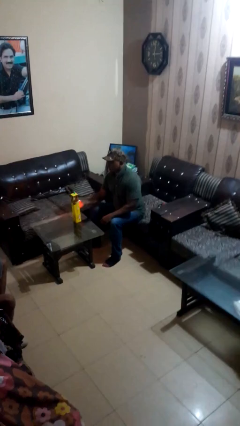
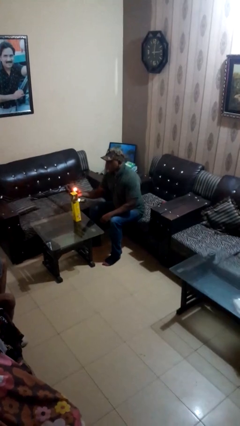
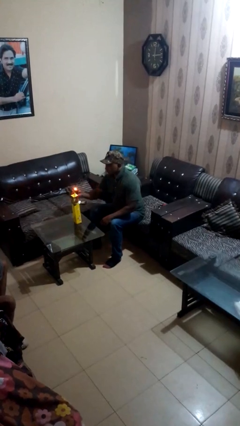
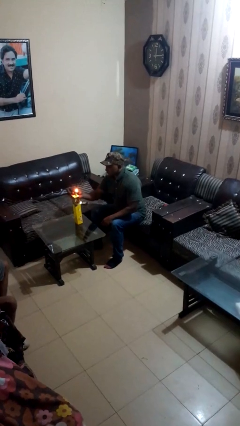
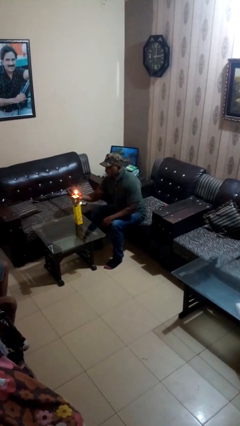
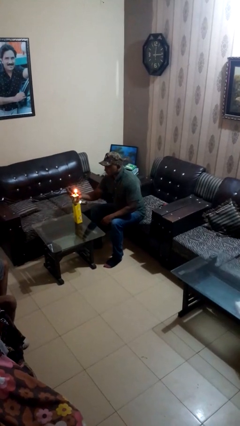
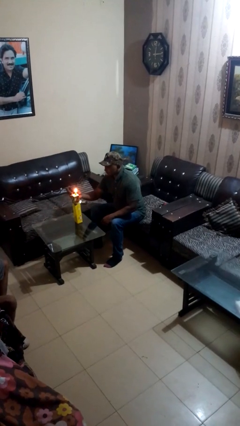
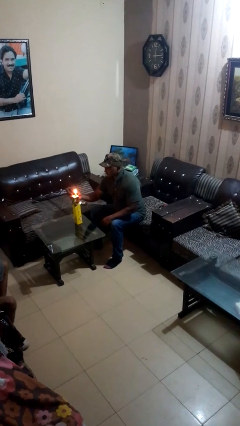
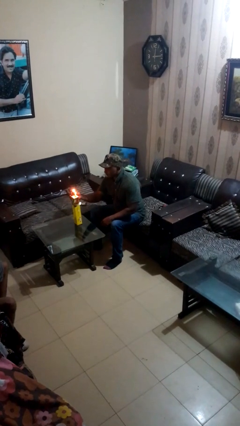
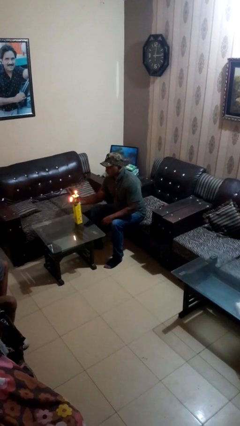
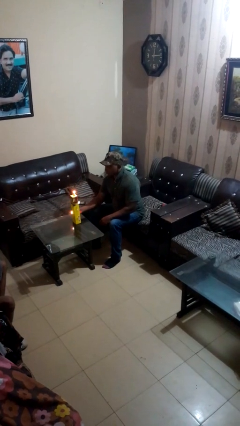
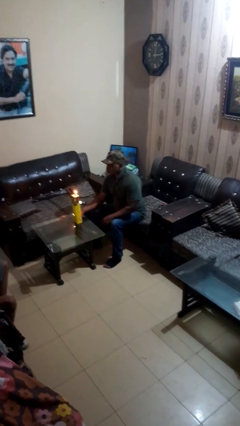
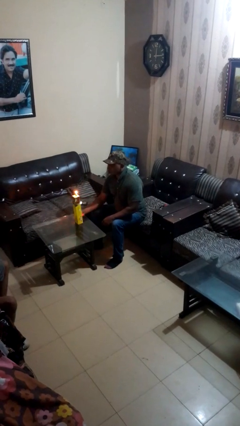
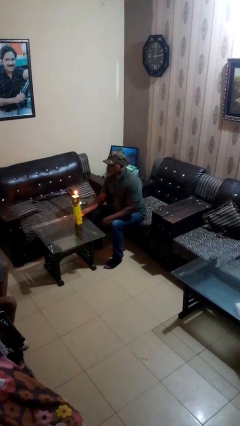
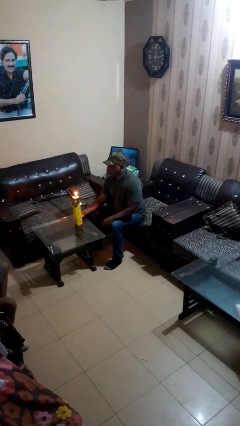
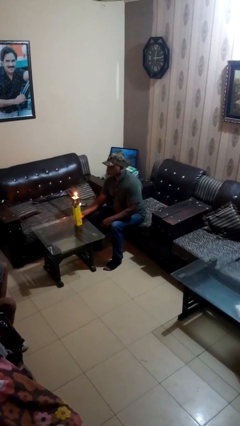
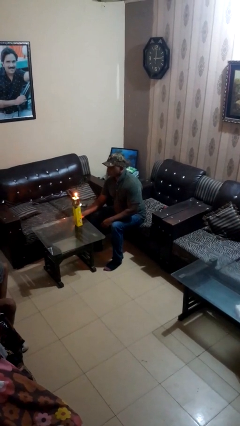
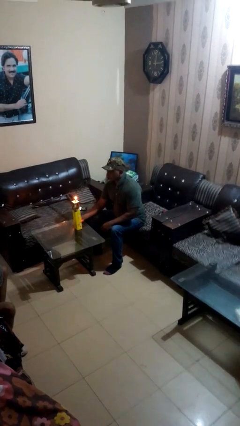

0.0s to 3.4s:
person lights candle

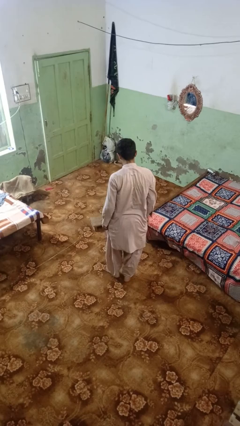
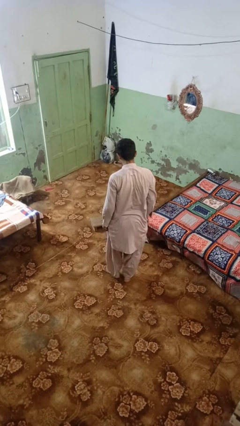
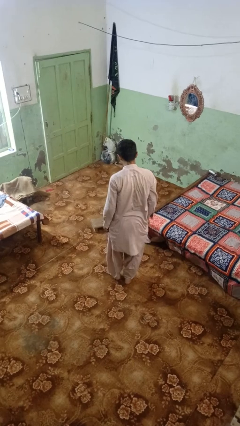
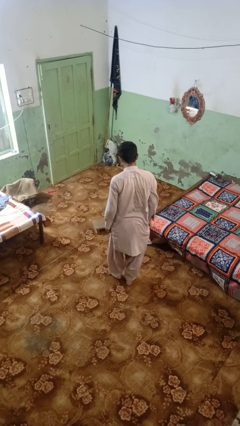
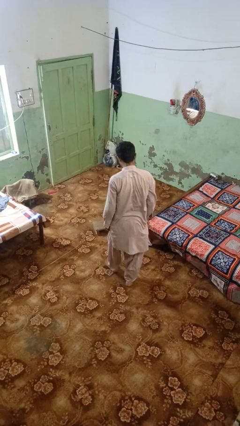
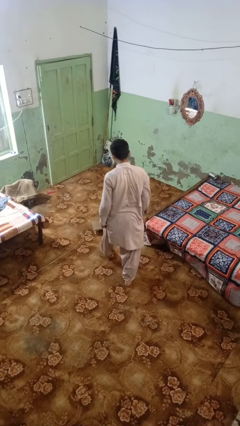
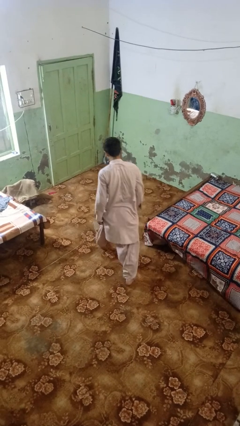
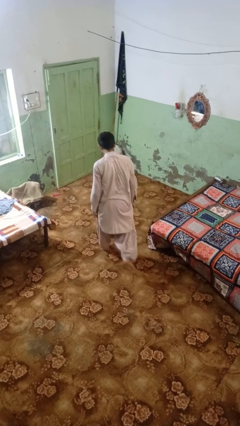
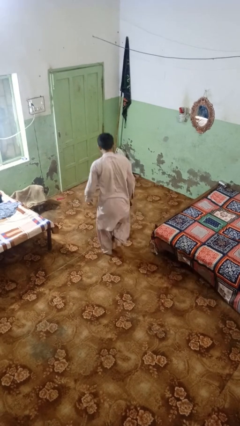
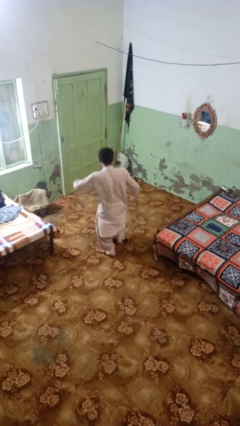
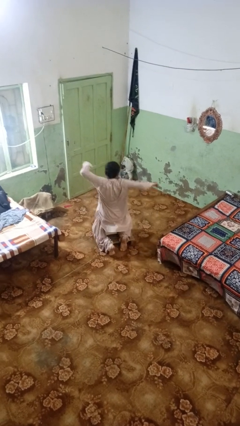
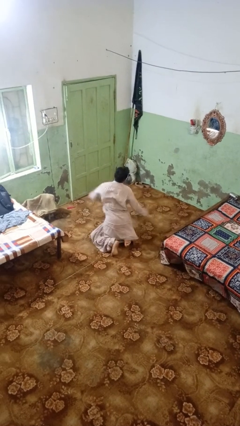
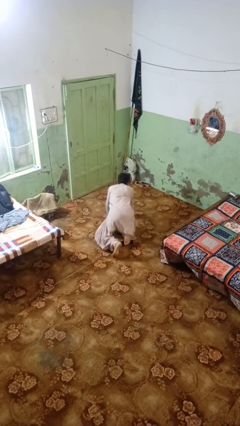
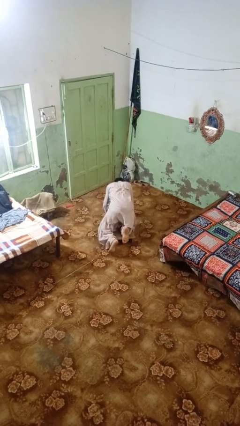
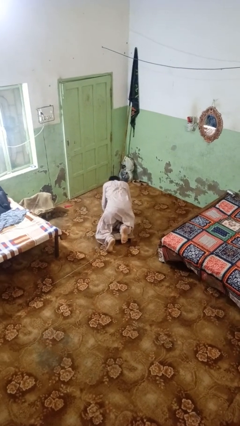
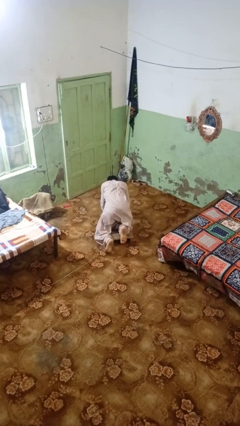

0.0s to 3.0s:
person trips on object on floor

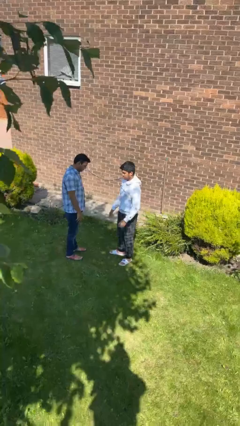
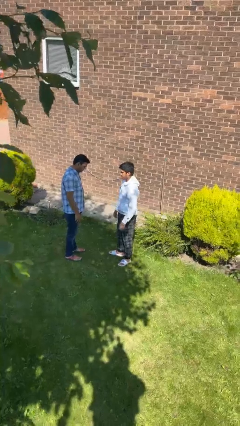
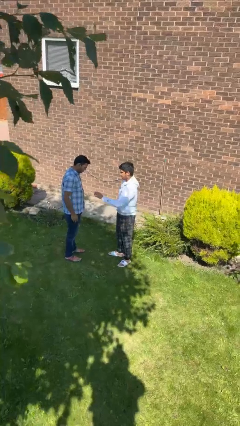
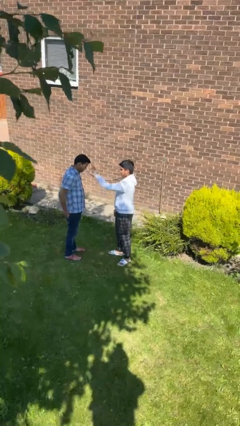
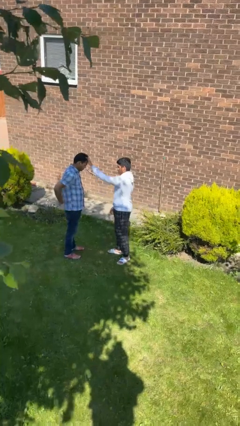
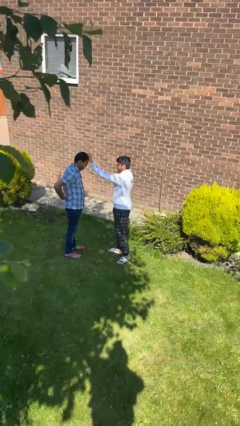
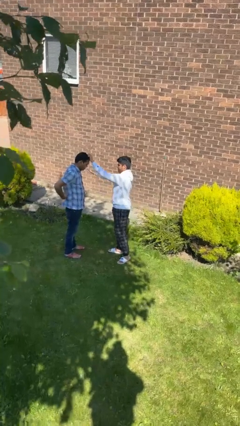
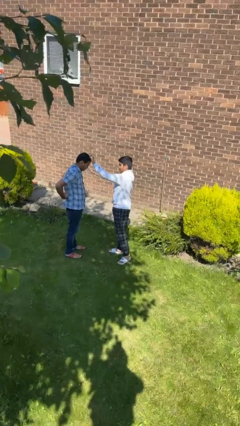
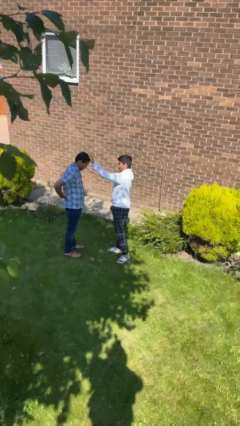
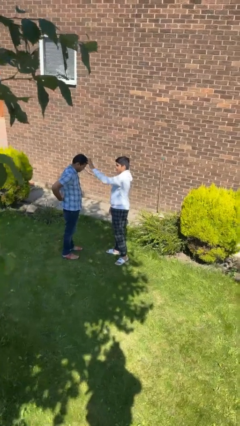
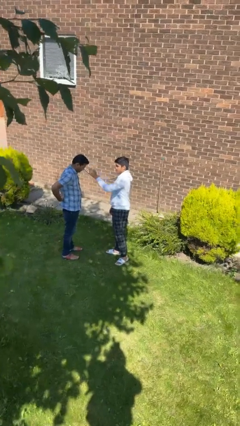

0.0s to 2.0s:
person grabs person by hair

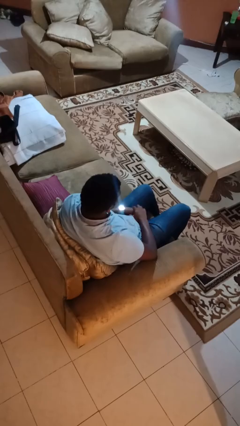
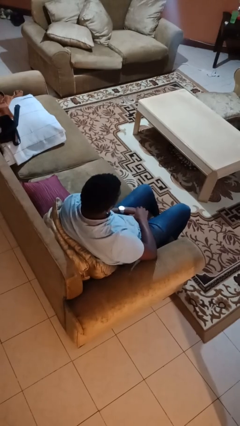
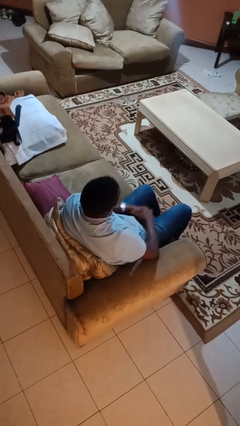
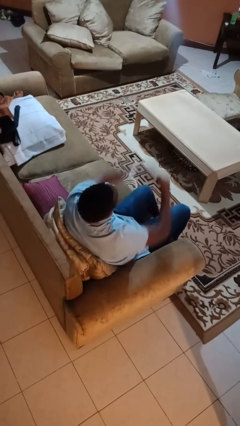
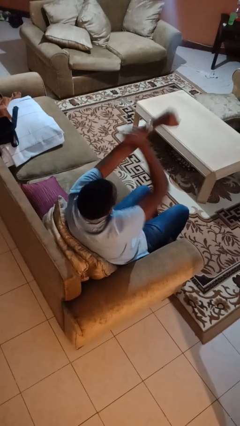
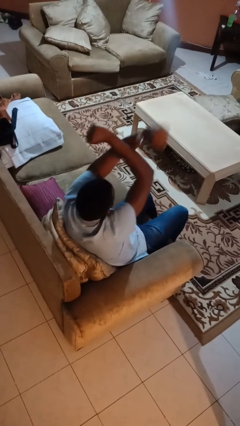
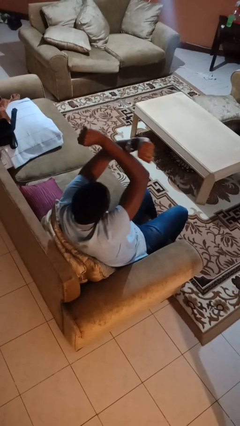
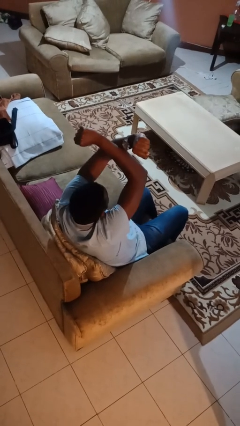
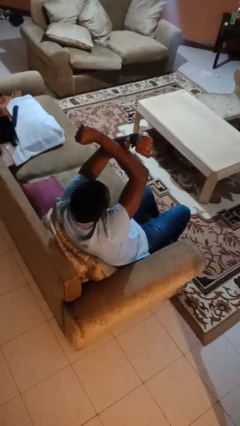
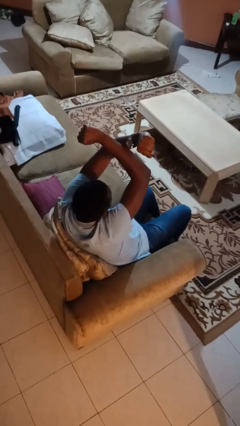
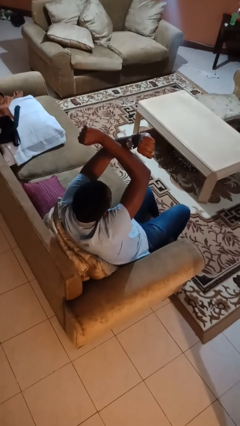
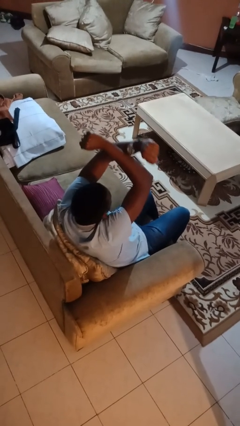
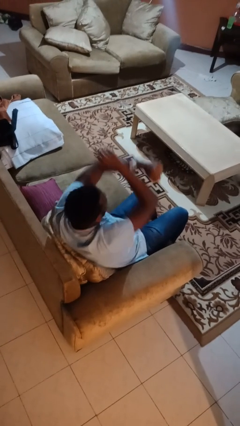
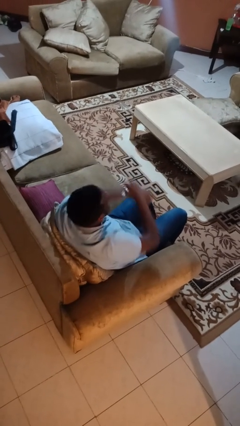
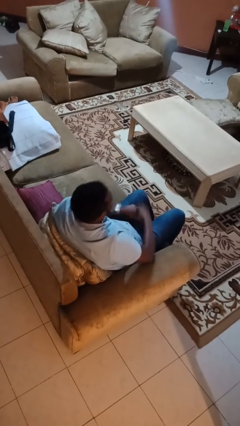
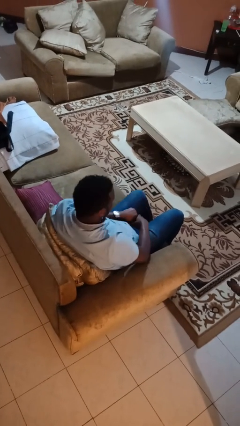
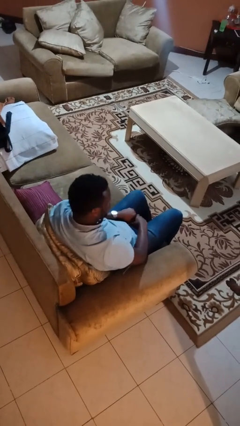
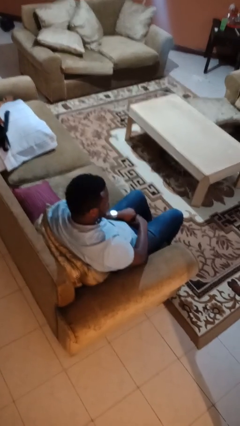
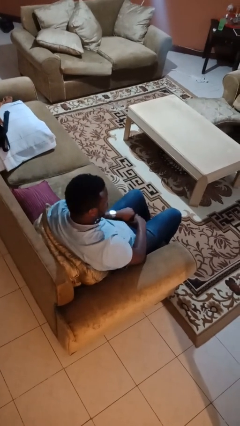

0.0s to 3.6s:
person gestures arms x

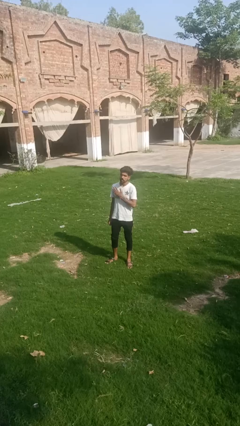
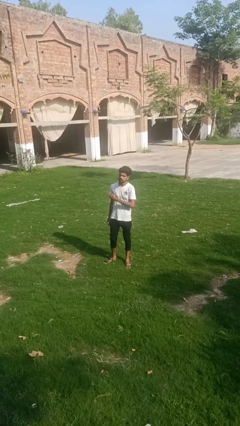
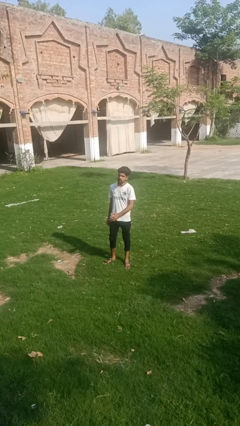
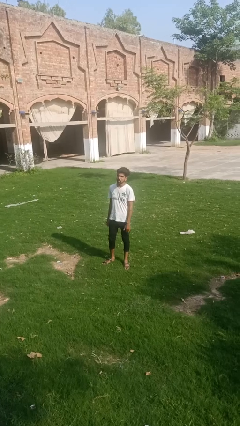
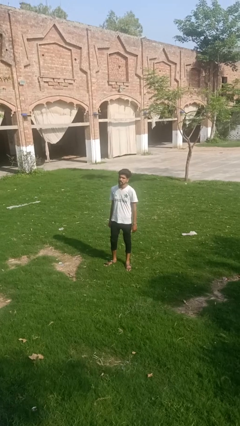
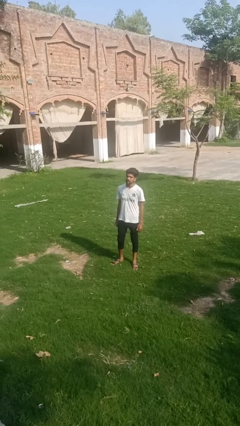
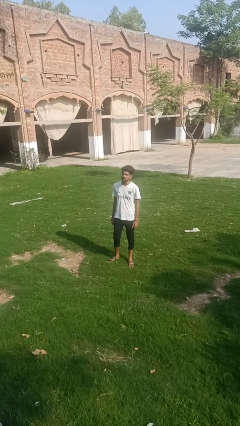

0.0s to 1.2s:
person drums on chest

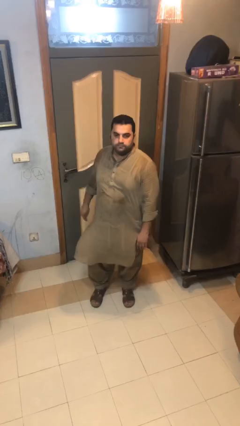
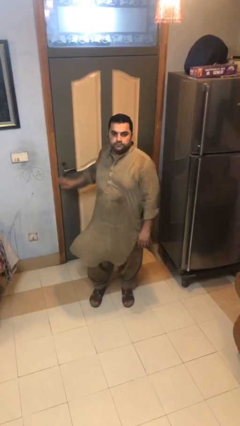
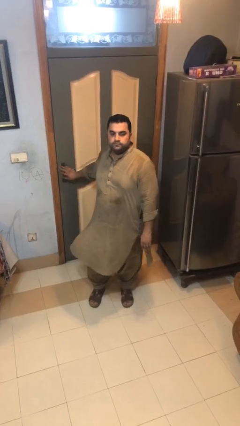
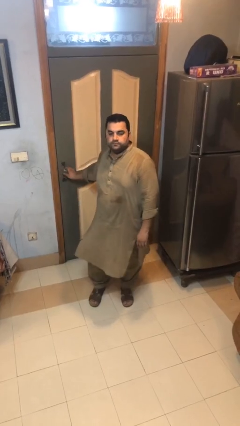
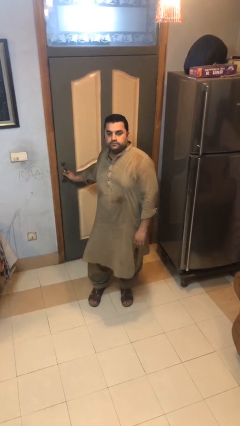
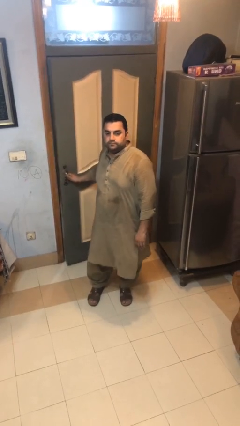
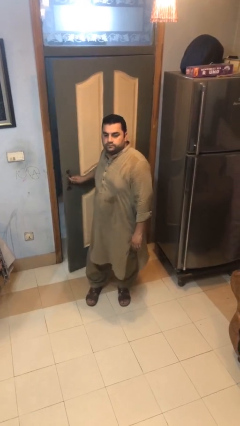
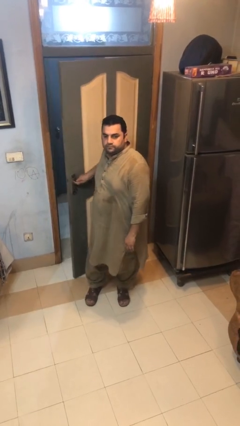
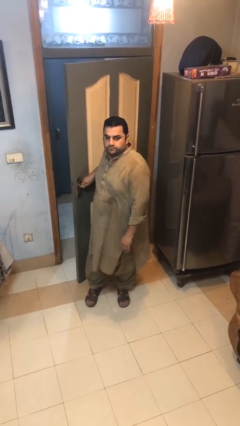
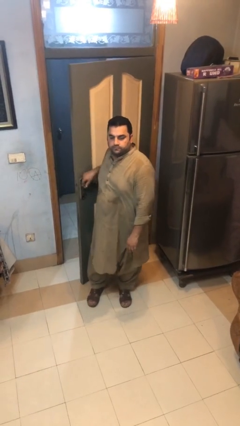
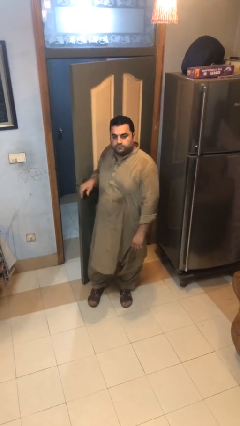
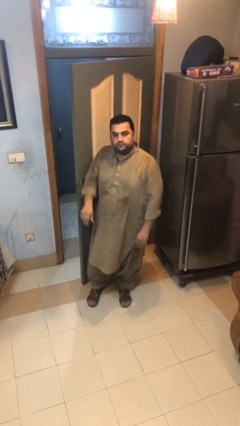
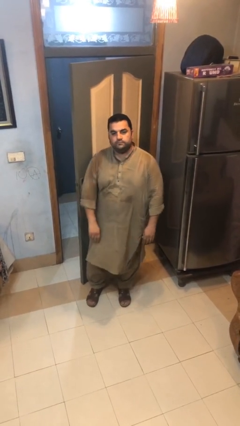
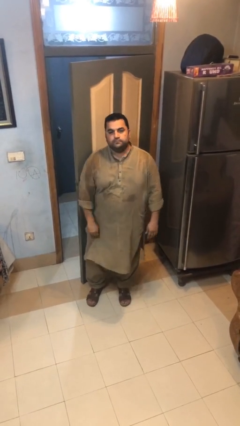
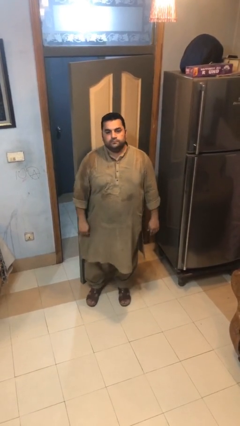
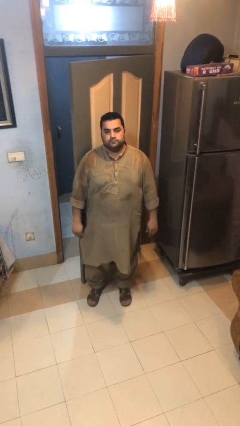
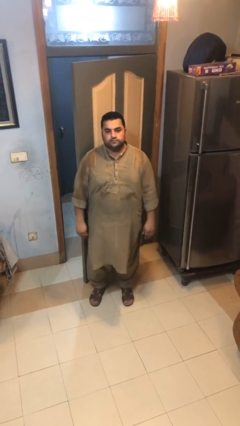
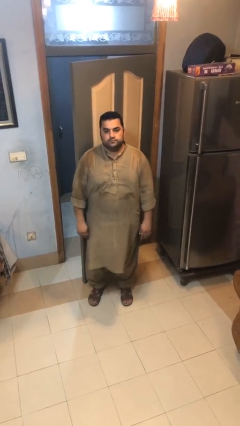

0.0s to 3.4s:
person opens facility door

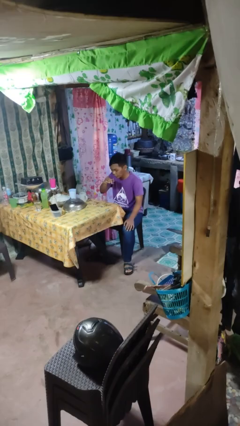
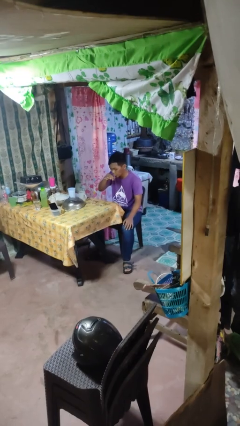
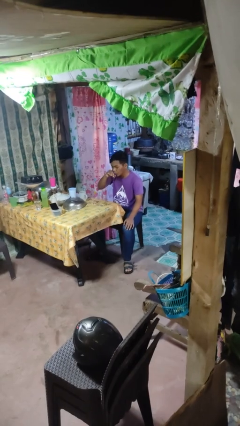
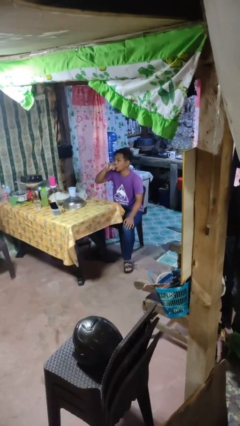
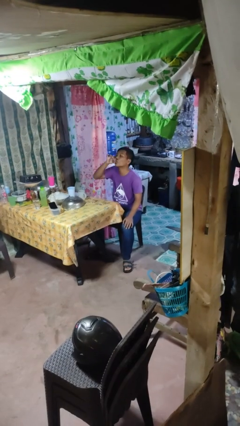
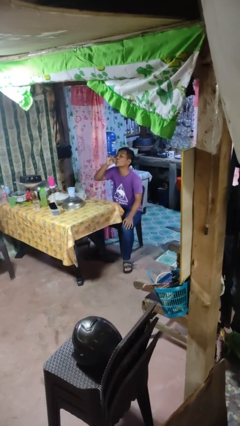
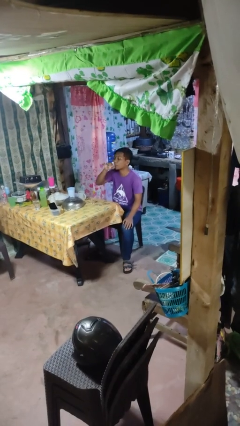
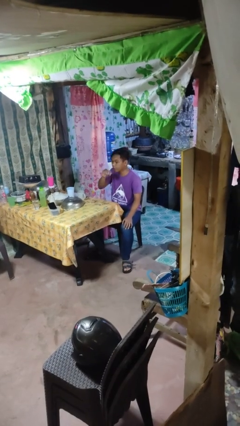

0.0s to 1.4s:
person drinks from shotglass
